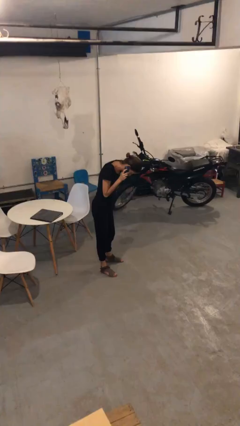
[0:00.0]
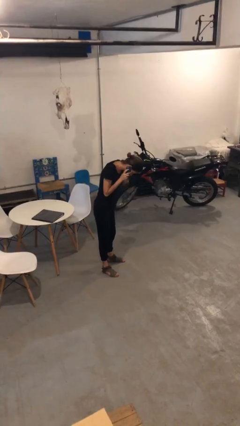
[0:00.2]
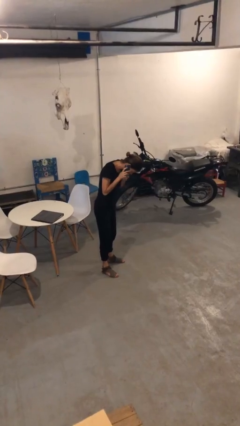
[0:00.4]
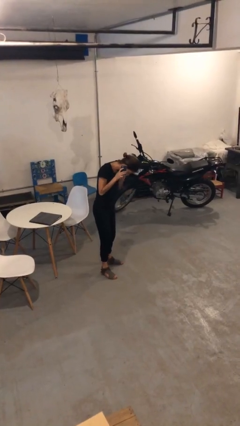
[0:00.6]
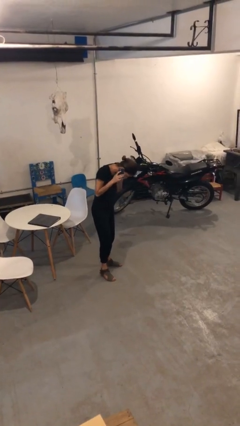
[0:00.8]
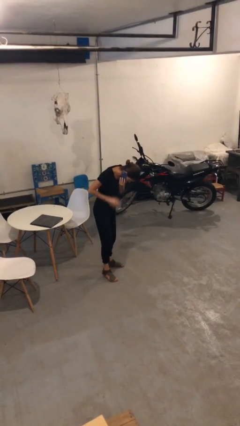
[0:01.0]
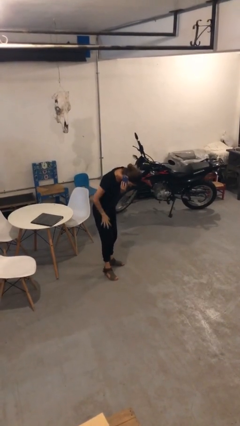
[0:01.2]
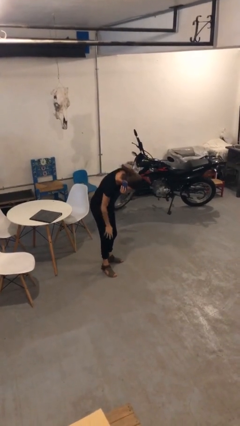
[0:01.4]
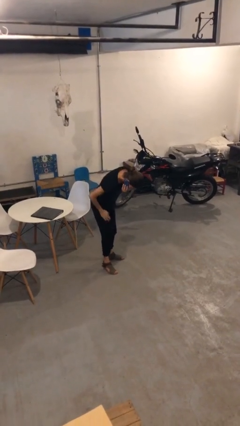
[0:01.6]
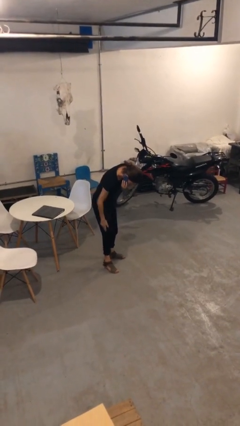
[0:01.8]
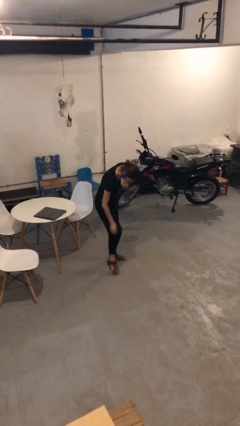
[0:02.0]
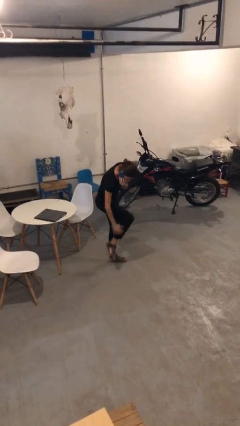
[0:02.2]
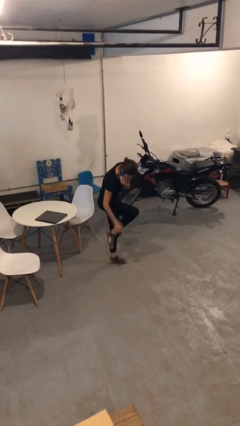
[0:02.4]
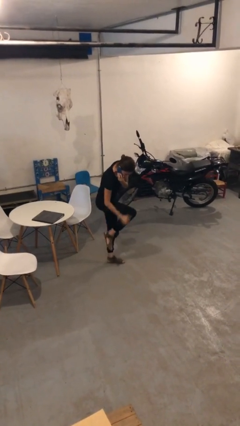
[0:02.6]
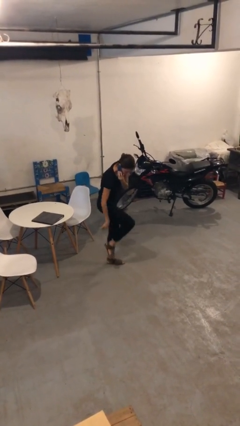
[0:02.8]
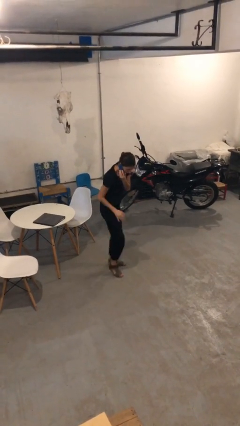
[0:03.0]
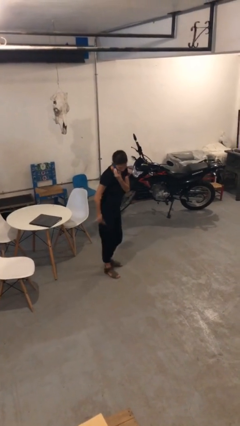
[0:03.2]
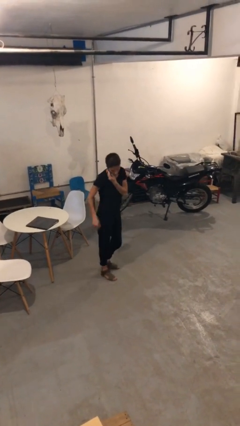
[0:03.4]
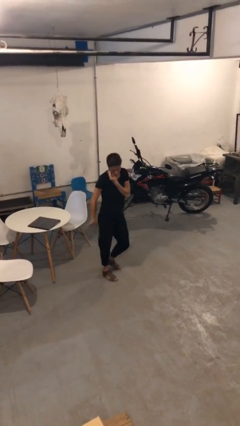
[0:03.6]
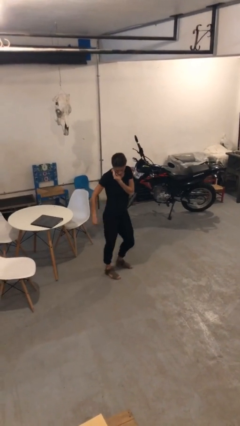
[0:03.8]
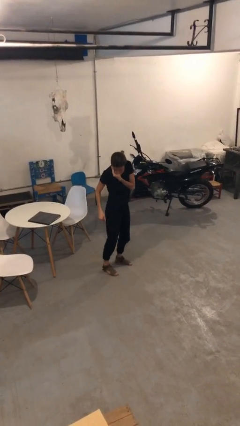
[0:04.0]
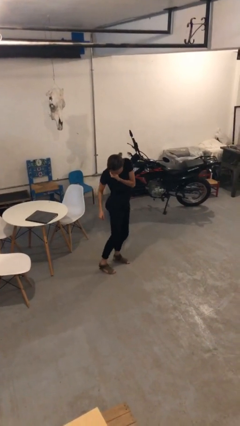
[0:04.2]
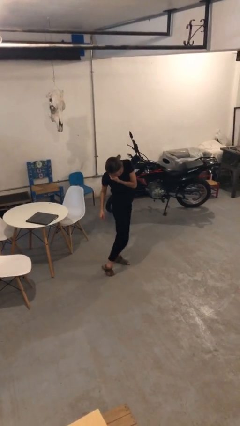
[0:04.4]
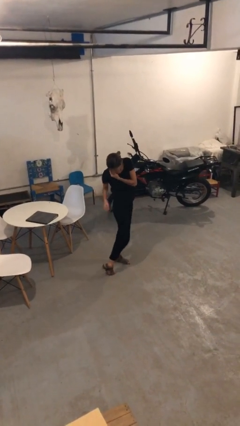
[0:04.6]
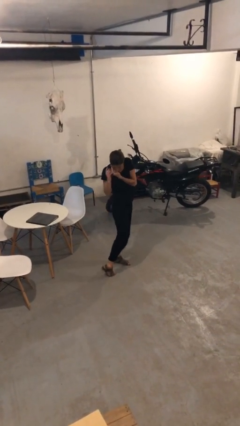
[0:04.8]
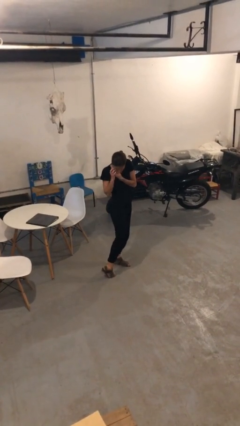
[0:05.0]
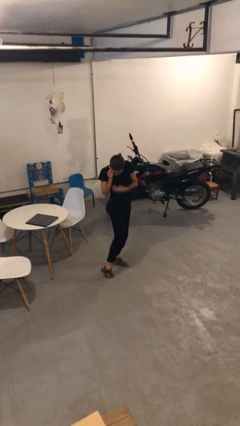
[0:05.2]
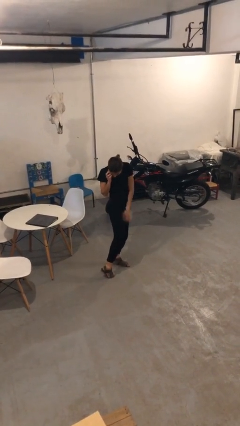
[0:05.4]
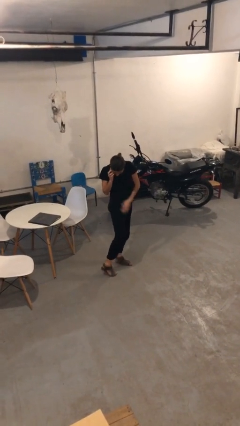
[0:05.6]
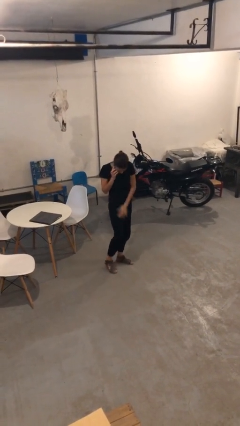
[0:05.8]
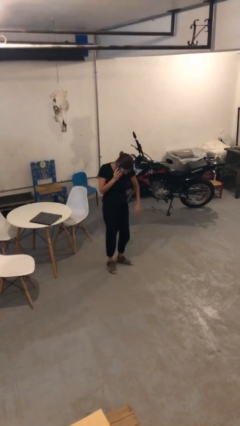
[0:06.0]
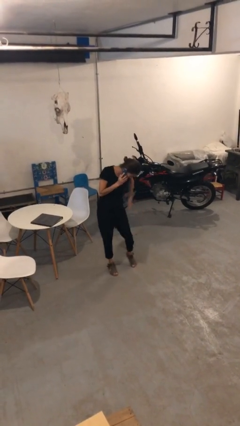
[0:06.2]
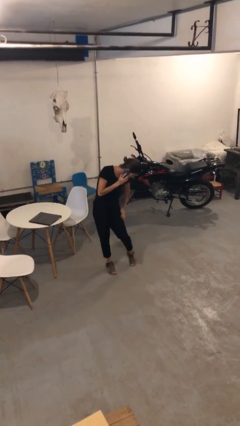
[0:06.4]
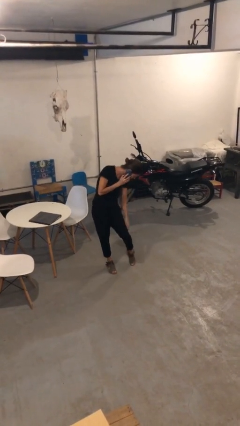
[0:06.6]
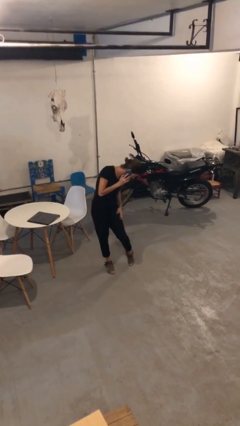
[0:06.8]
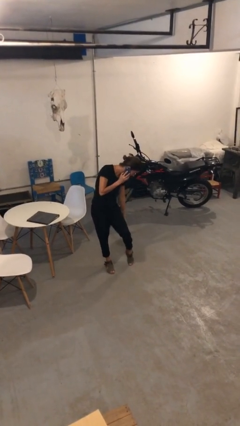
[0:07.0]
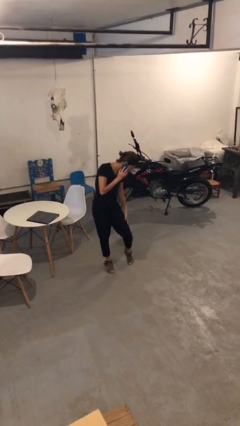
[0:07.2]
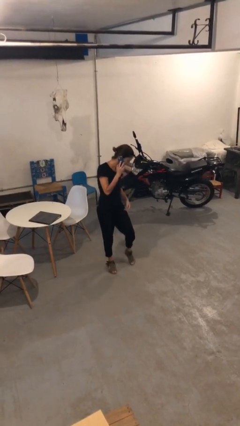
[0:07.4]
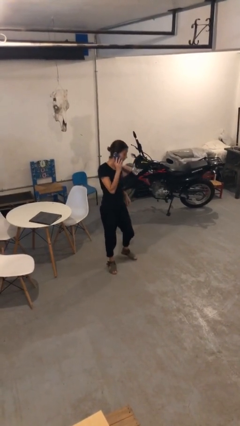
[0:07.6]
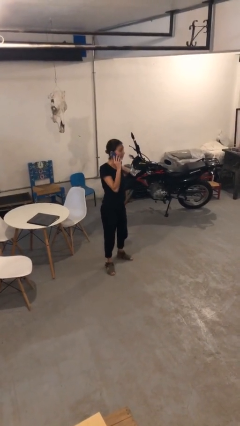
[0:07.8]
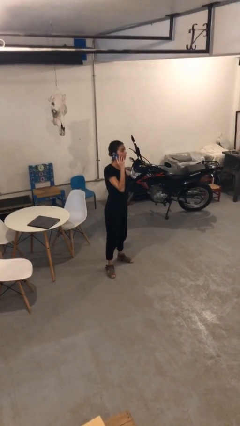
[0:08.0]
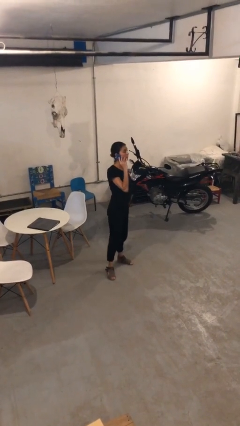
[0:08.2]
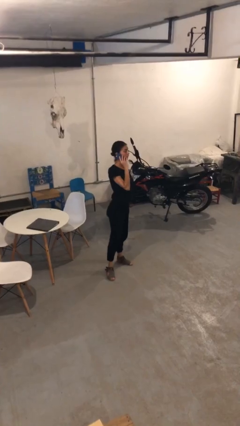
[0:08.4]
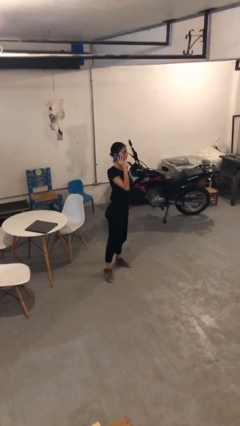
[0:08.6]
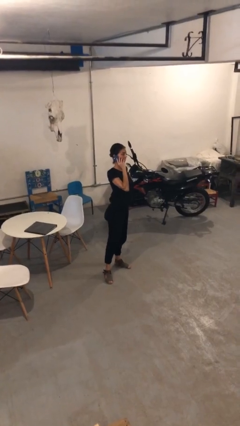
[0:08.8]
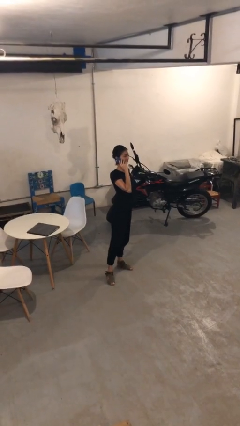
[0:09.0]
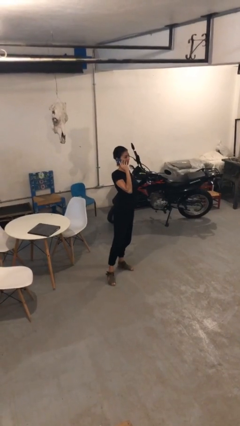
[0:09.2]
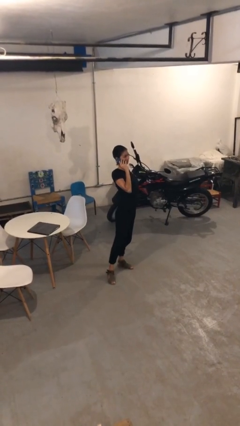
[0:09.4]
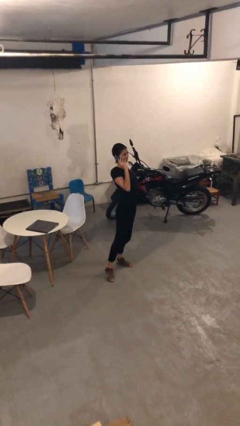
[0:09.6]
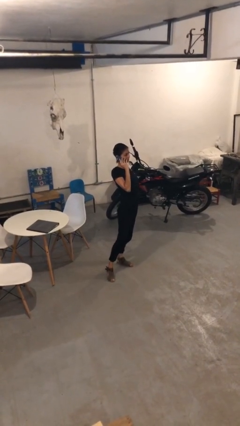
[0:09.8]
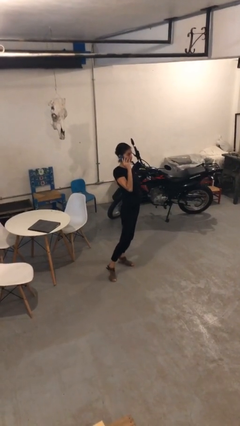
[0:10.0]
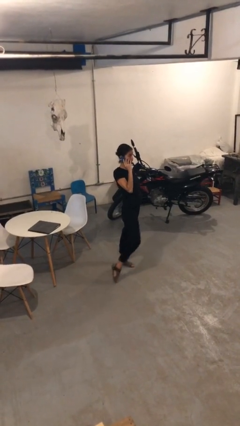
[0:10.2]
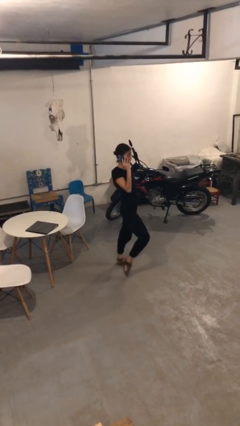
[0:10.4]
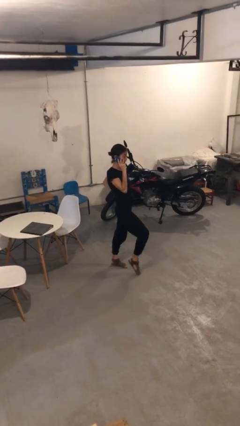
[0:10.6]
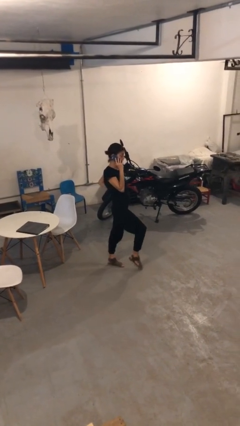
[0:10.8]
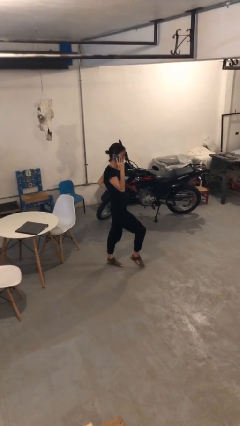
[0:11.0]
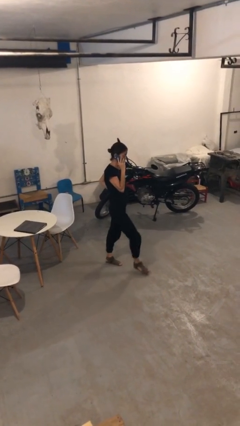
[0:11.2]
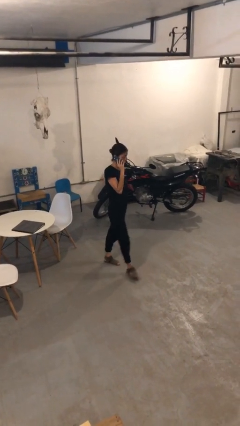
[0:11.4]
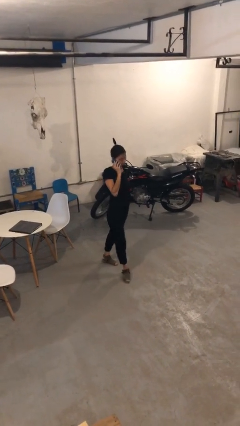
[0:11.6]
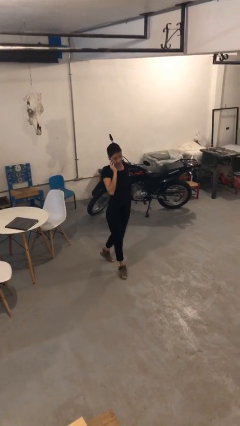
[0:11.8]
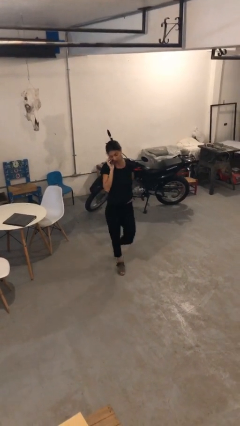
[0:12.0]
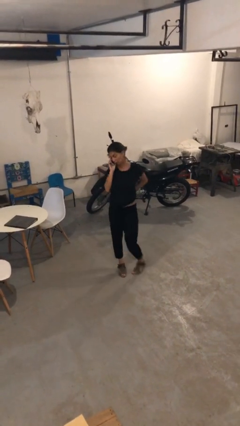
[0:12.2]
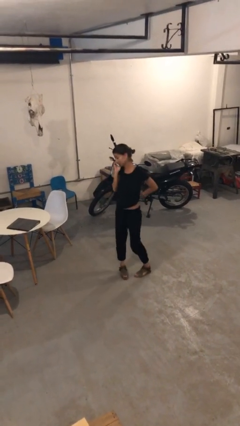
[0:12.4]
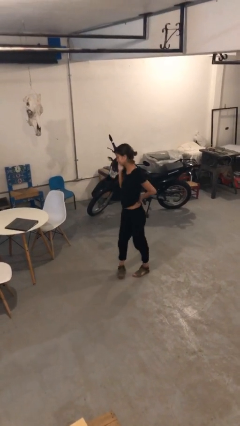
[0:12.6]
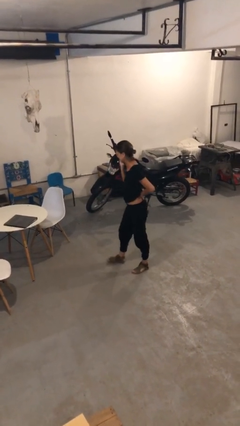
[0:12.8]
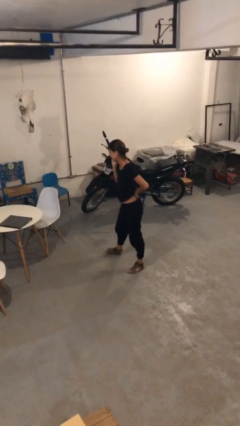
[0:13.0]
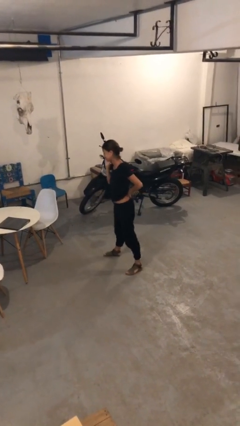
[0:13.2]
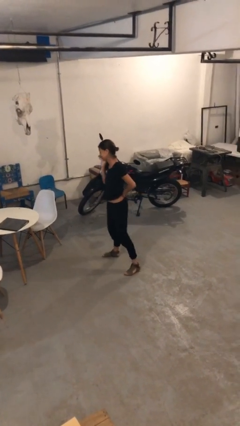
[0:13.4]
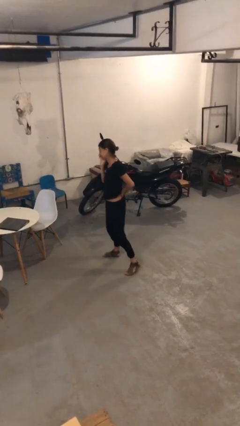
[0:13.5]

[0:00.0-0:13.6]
person talks on phone

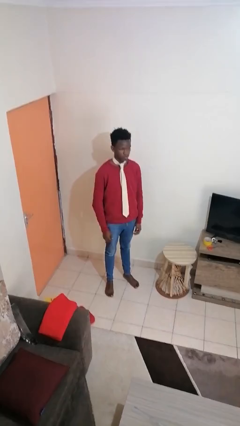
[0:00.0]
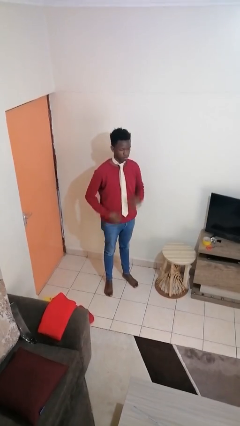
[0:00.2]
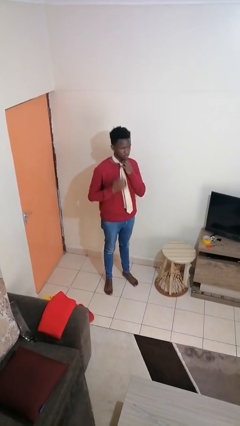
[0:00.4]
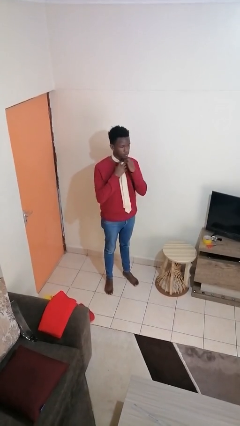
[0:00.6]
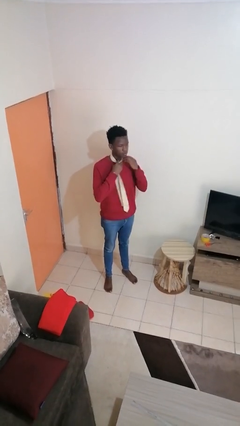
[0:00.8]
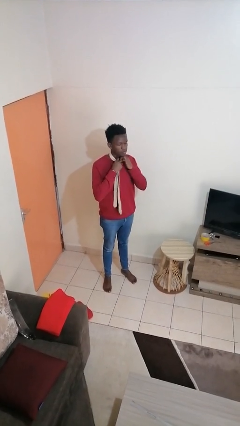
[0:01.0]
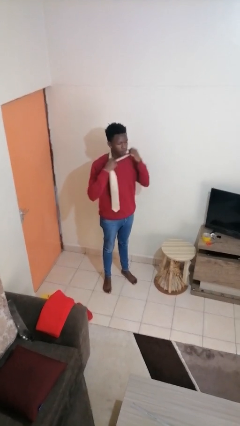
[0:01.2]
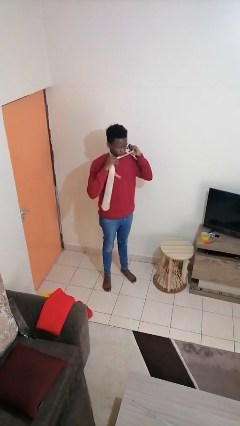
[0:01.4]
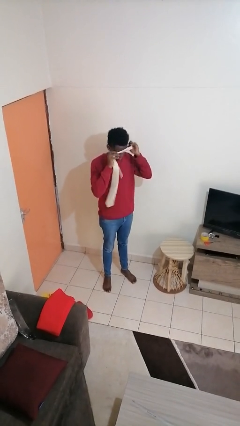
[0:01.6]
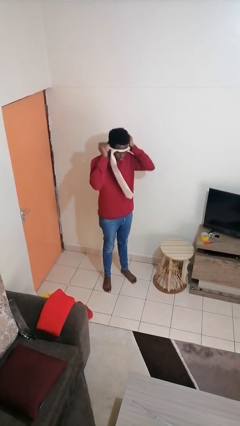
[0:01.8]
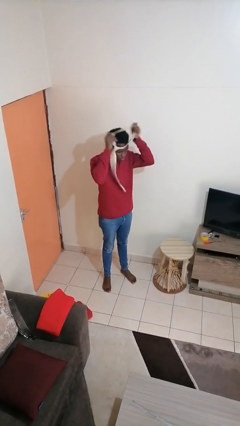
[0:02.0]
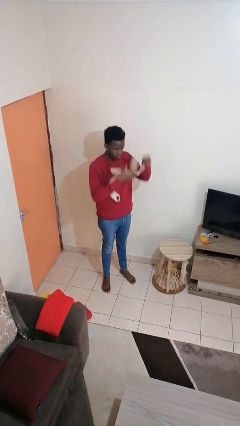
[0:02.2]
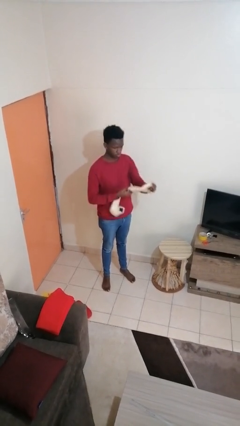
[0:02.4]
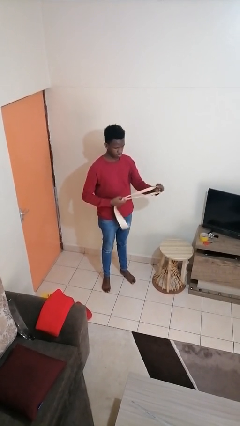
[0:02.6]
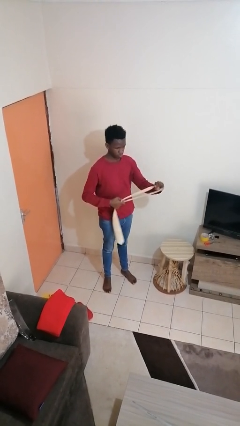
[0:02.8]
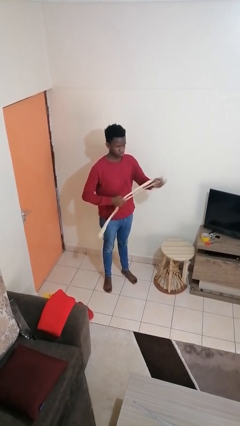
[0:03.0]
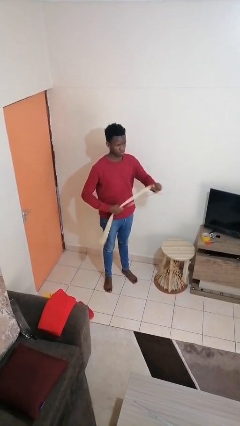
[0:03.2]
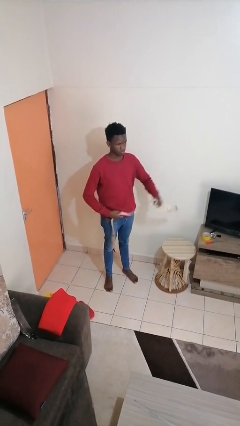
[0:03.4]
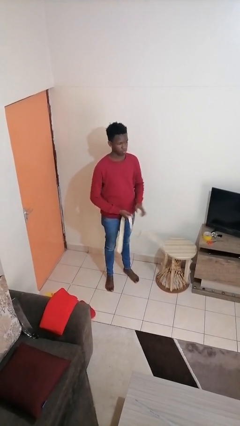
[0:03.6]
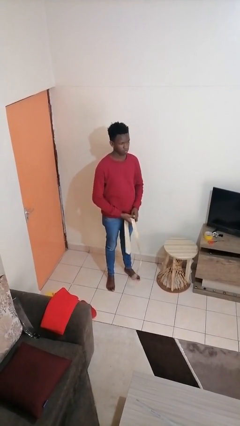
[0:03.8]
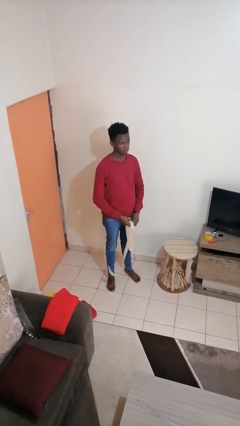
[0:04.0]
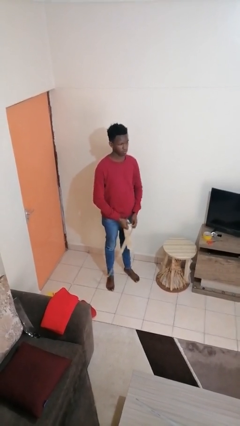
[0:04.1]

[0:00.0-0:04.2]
person takes off necktie

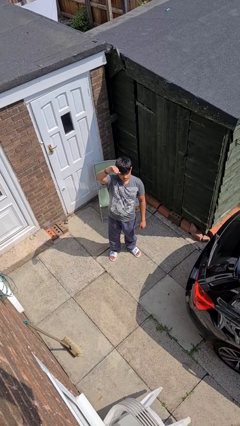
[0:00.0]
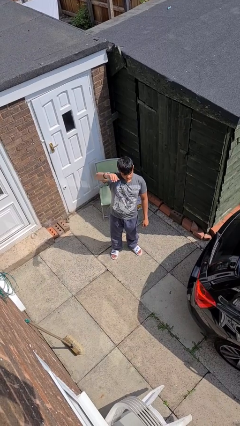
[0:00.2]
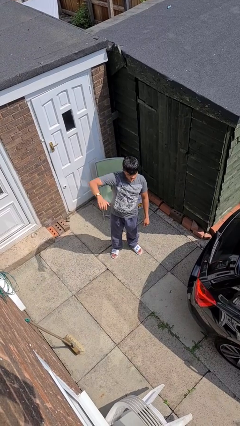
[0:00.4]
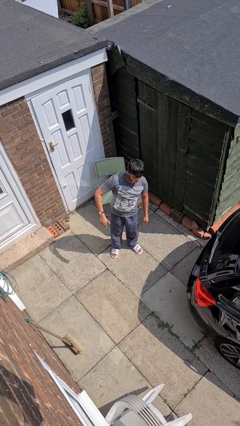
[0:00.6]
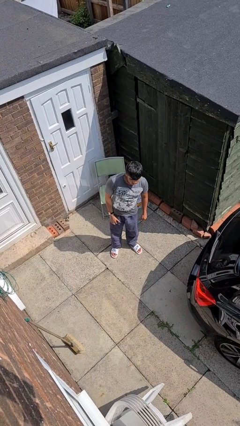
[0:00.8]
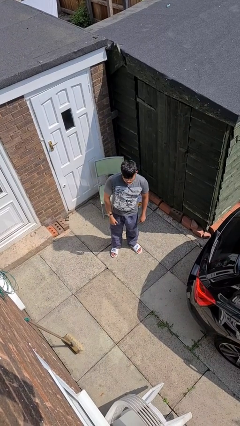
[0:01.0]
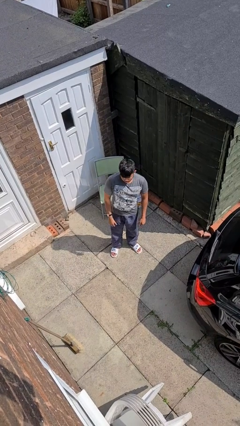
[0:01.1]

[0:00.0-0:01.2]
person gestures lower hand
